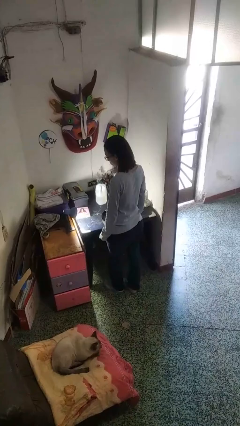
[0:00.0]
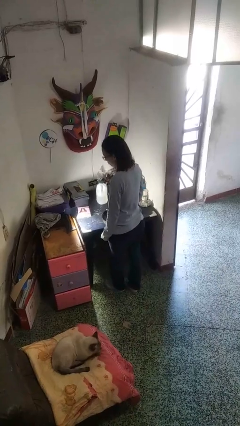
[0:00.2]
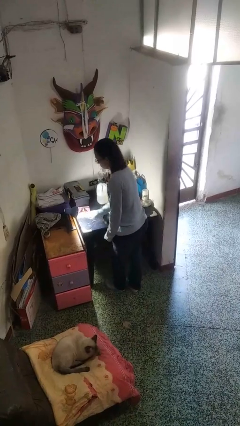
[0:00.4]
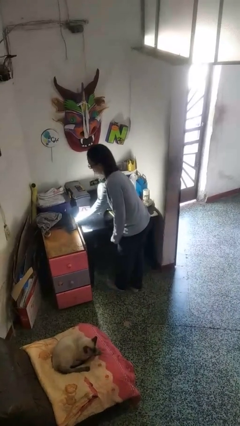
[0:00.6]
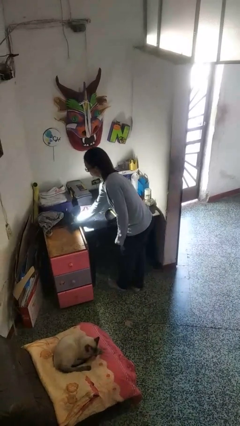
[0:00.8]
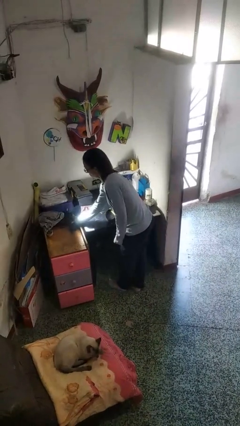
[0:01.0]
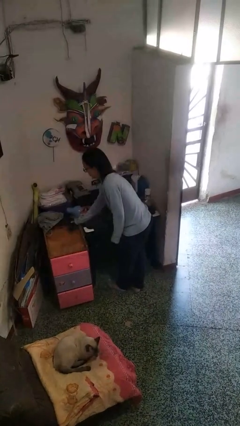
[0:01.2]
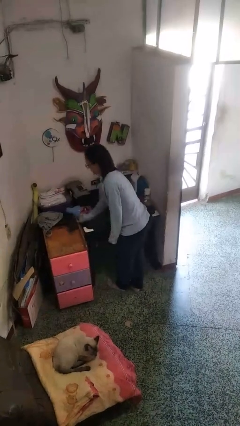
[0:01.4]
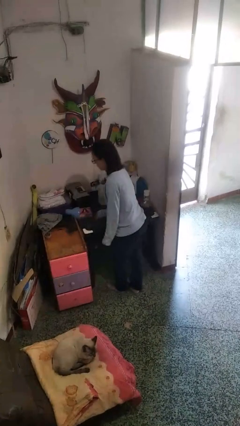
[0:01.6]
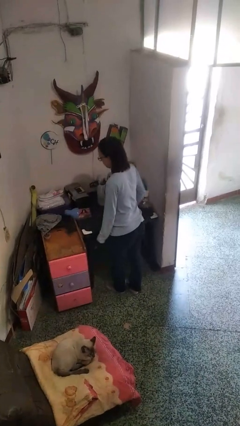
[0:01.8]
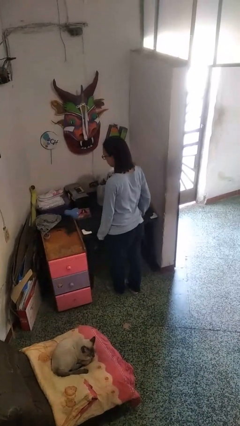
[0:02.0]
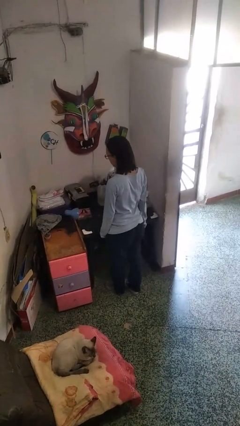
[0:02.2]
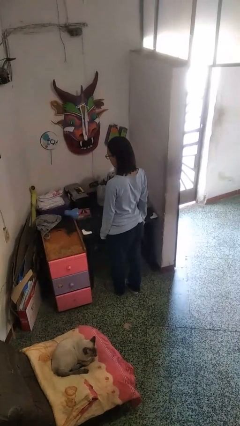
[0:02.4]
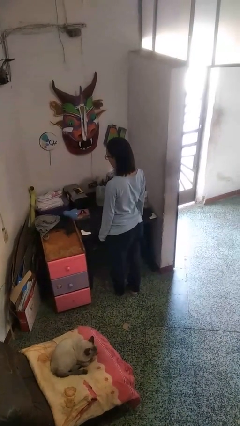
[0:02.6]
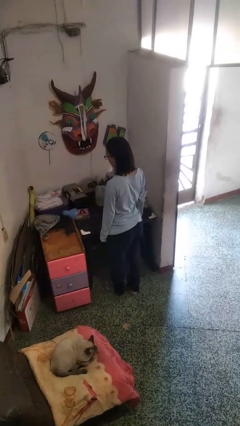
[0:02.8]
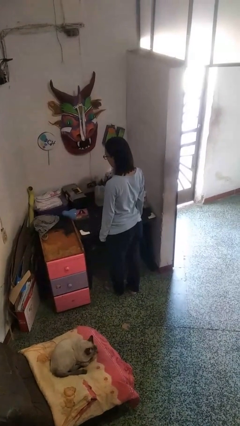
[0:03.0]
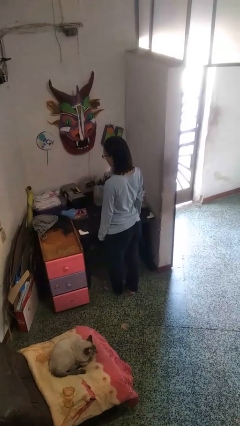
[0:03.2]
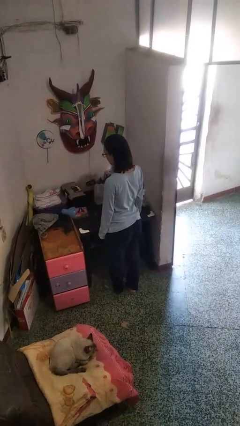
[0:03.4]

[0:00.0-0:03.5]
person turns off lamp

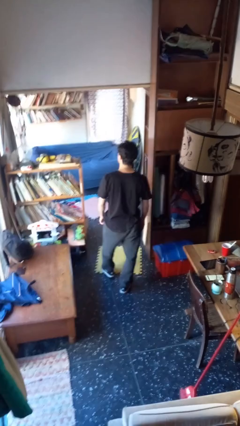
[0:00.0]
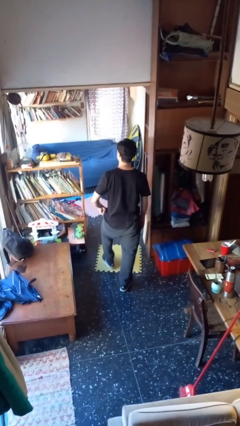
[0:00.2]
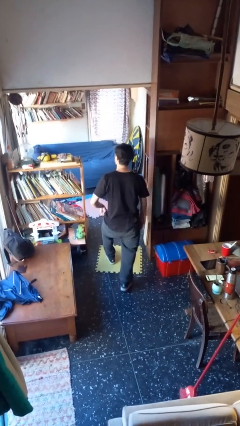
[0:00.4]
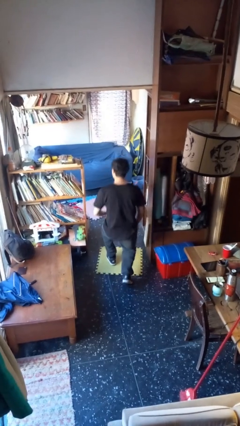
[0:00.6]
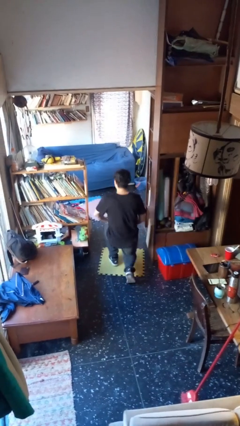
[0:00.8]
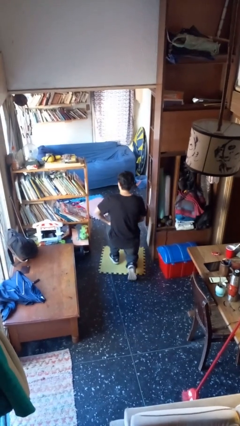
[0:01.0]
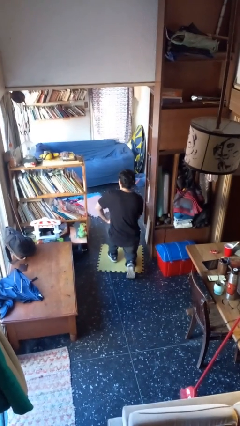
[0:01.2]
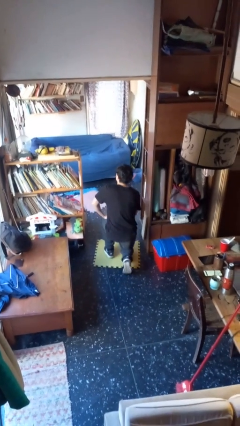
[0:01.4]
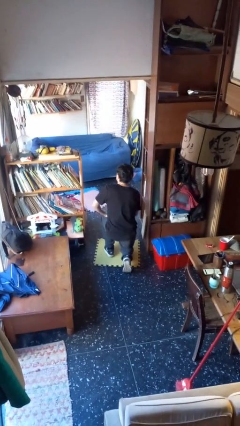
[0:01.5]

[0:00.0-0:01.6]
person kneels

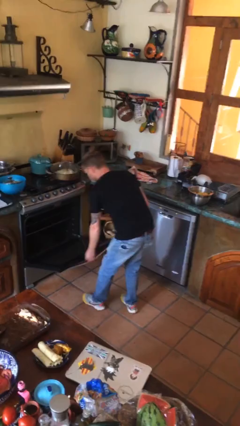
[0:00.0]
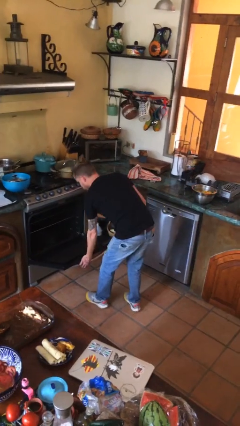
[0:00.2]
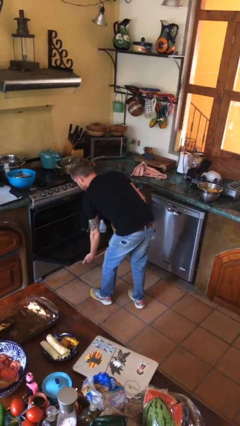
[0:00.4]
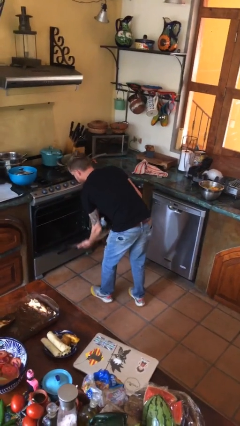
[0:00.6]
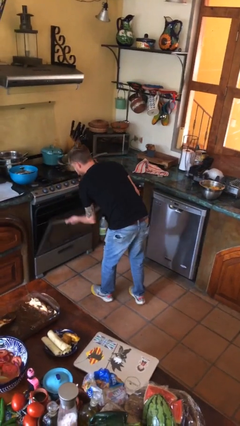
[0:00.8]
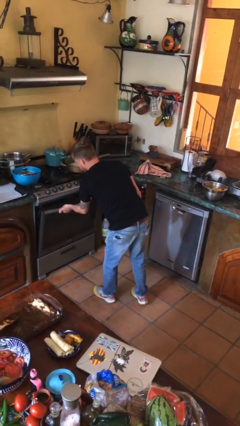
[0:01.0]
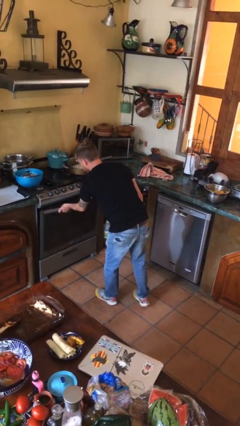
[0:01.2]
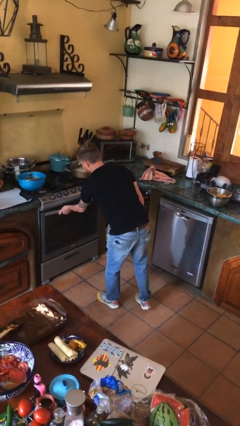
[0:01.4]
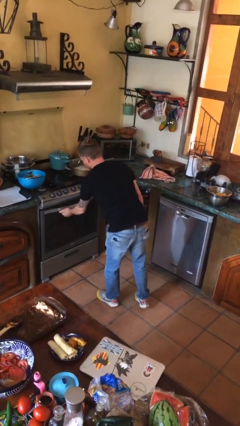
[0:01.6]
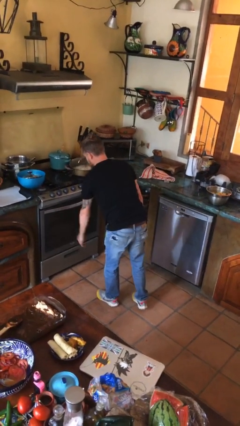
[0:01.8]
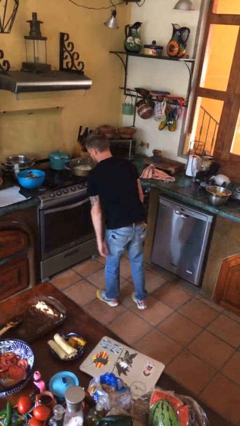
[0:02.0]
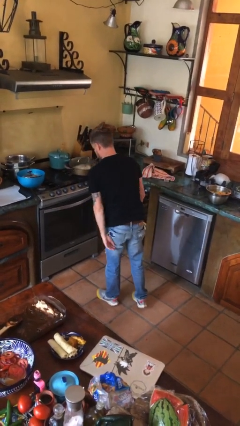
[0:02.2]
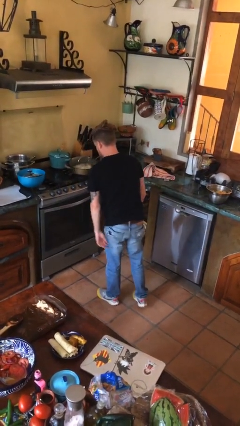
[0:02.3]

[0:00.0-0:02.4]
person closes oven door

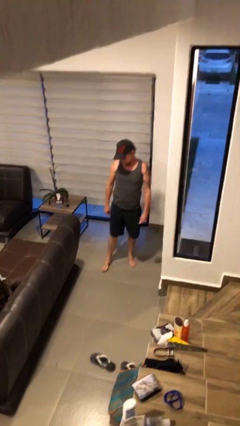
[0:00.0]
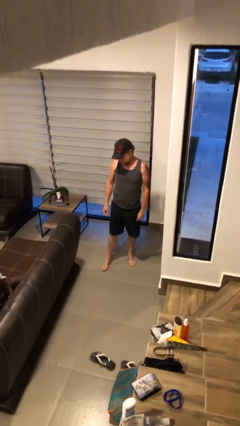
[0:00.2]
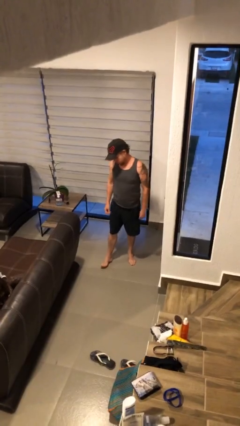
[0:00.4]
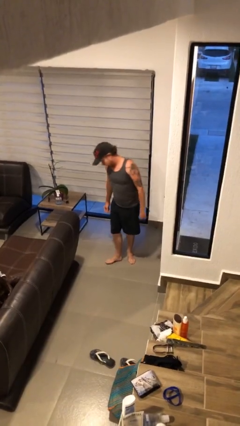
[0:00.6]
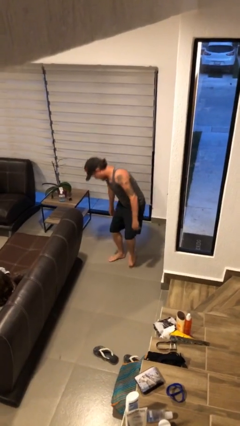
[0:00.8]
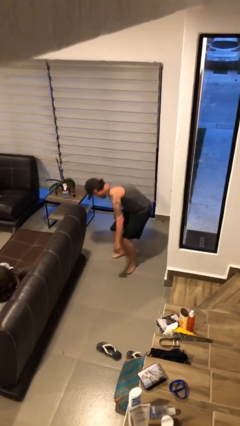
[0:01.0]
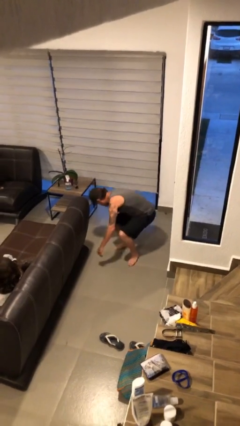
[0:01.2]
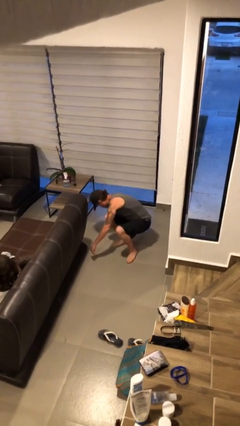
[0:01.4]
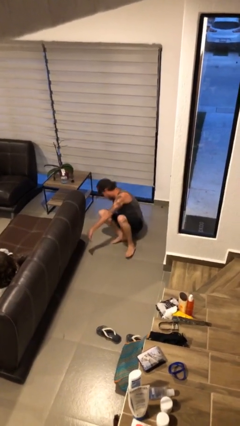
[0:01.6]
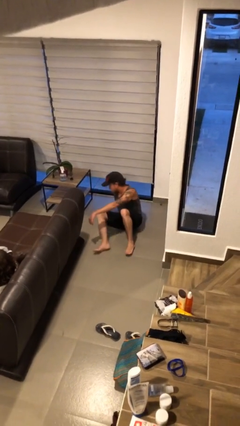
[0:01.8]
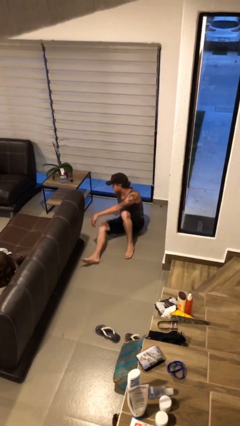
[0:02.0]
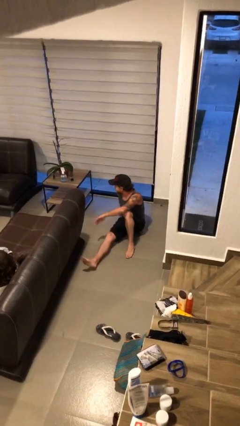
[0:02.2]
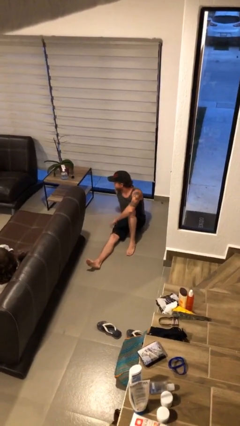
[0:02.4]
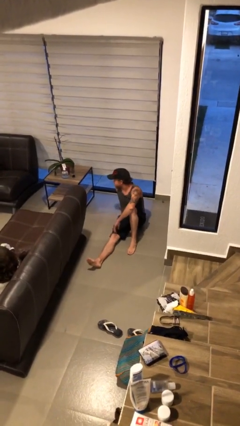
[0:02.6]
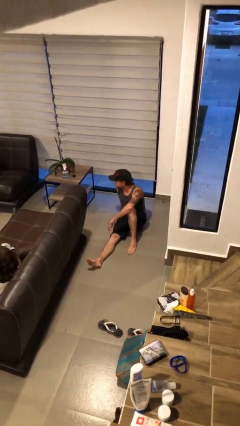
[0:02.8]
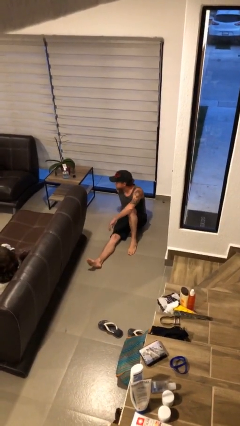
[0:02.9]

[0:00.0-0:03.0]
person sits down

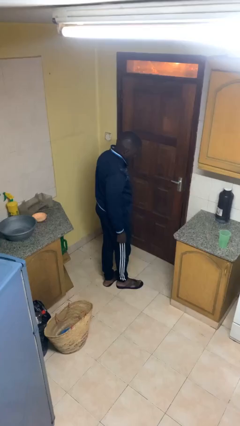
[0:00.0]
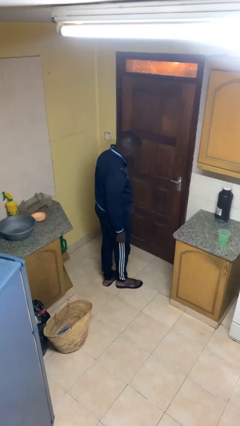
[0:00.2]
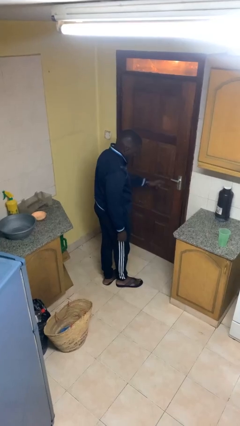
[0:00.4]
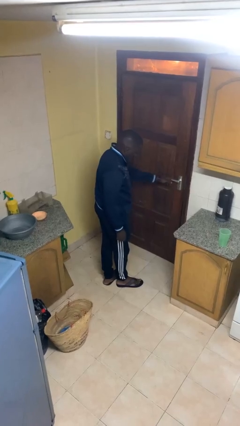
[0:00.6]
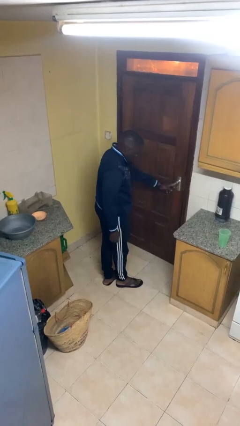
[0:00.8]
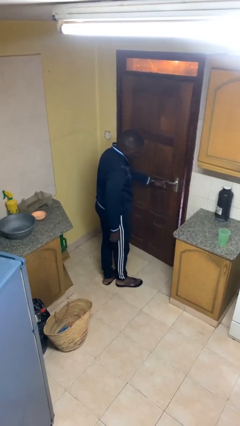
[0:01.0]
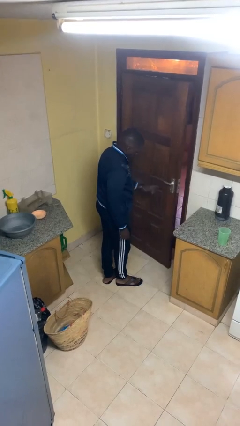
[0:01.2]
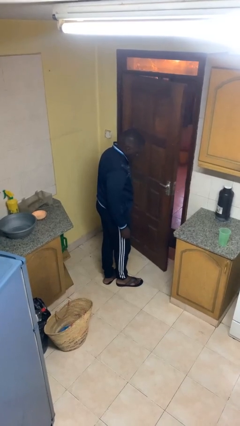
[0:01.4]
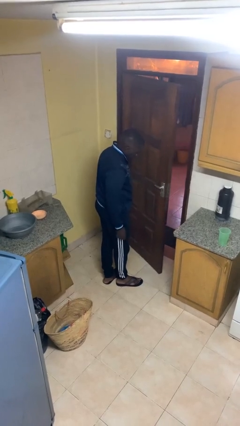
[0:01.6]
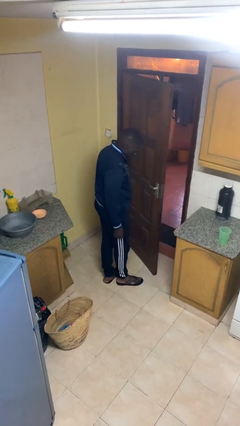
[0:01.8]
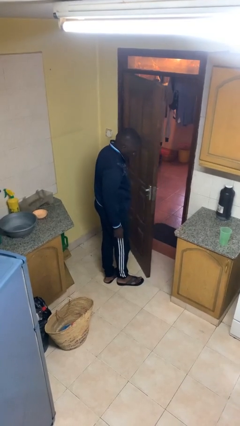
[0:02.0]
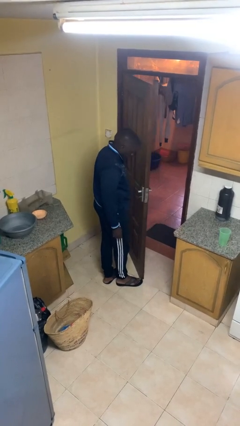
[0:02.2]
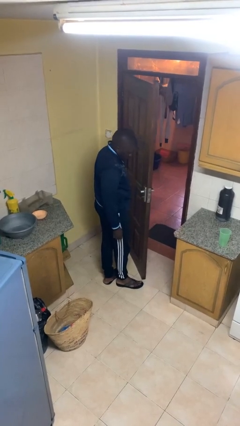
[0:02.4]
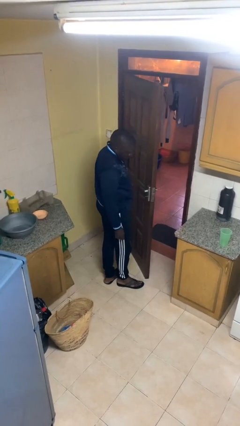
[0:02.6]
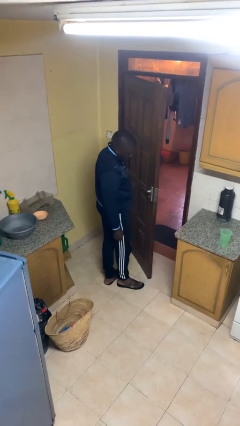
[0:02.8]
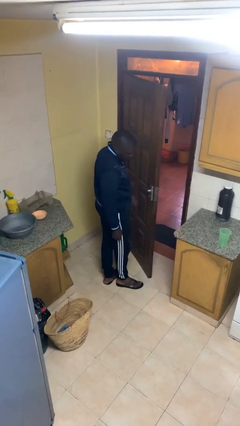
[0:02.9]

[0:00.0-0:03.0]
person opens facility door

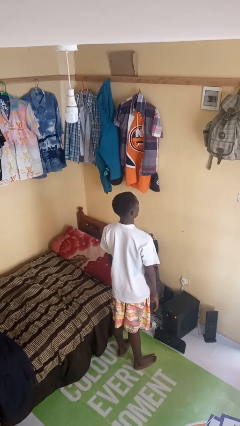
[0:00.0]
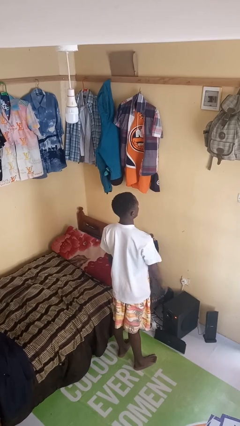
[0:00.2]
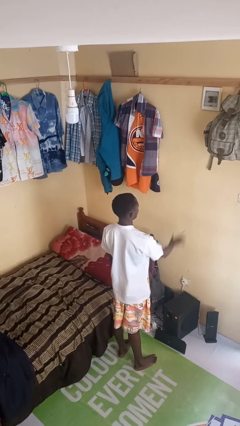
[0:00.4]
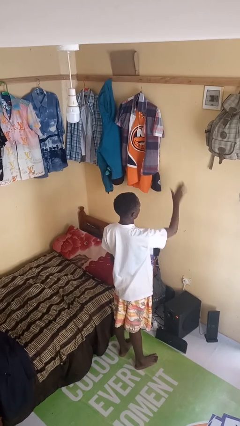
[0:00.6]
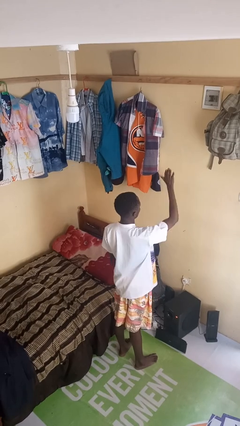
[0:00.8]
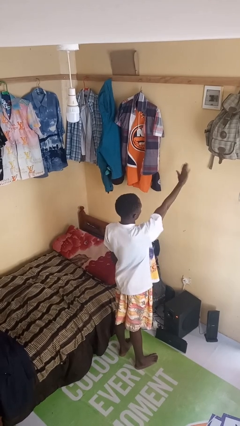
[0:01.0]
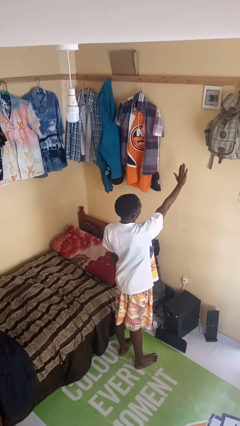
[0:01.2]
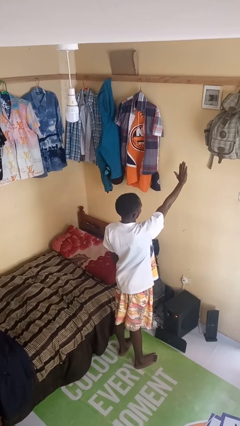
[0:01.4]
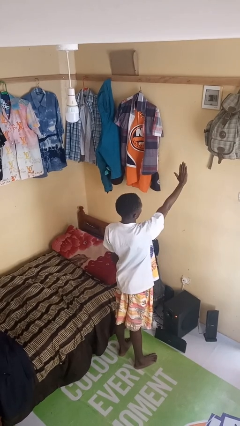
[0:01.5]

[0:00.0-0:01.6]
person gestures stop

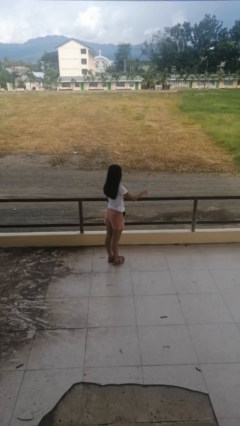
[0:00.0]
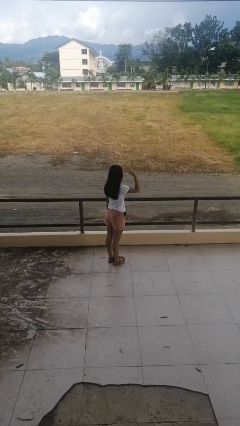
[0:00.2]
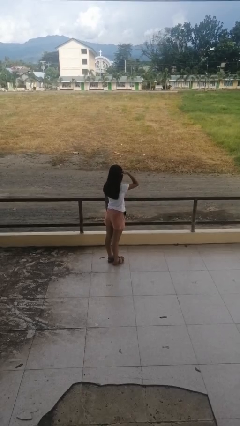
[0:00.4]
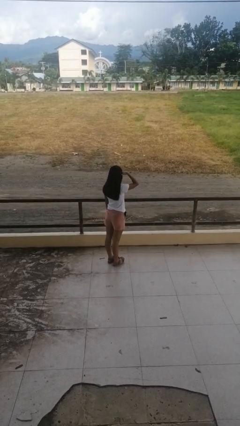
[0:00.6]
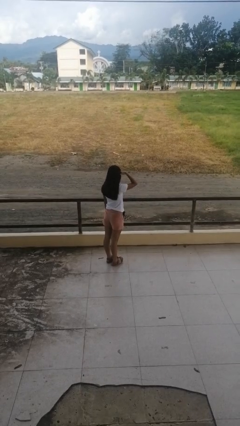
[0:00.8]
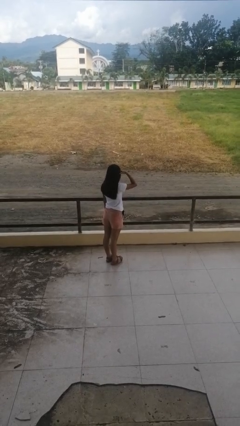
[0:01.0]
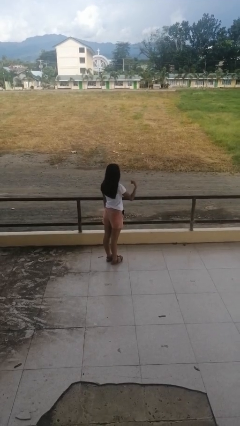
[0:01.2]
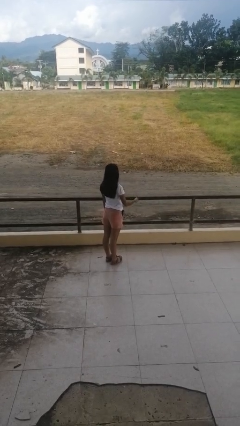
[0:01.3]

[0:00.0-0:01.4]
person shades eyes

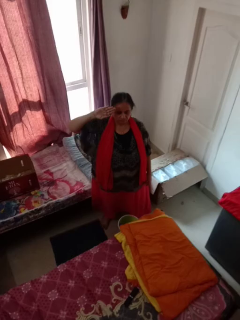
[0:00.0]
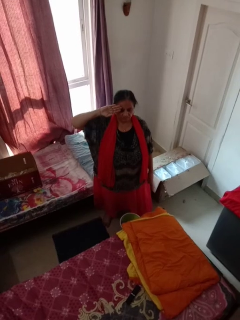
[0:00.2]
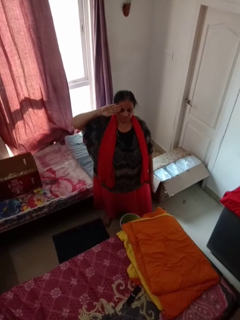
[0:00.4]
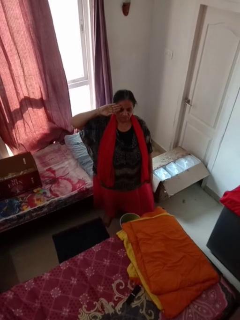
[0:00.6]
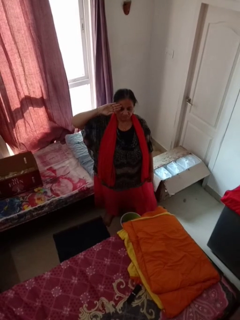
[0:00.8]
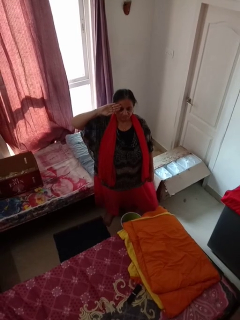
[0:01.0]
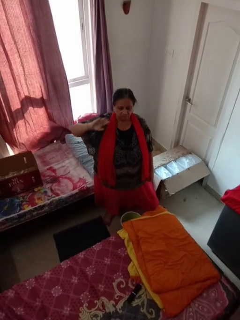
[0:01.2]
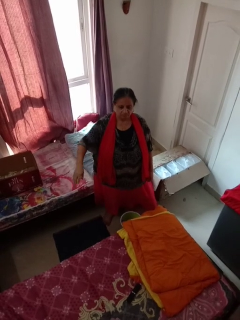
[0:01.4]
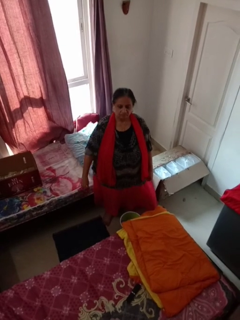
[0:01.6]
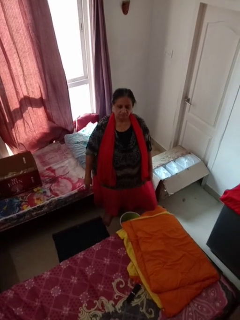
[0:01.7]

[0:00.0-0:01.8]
person salutes
